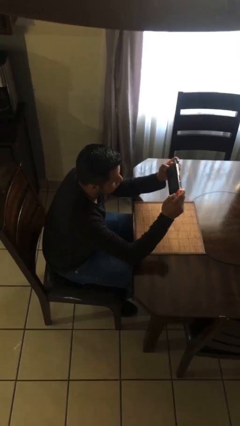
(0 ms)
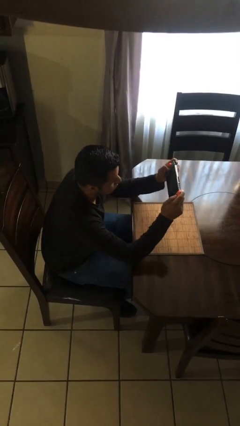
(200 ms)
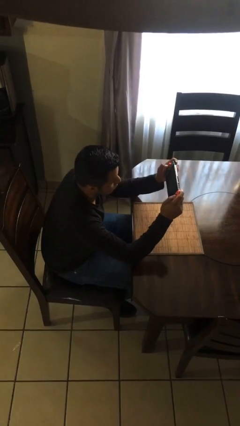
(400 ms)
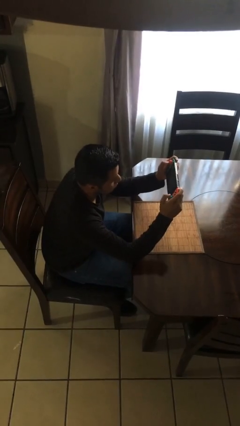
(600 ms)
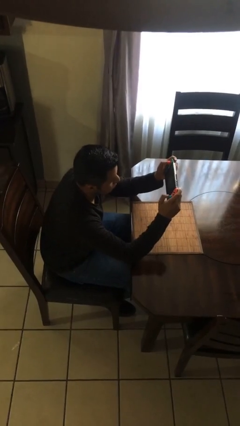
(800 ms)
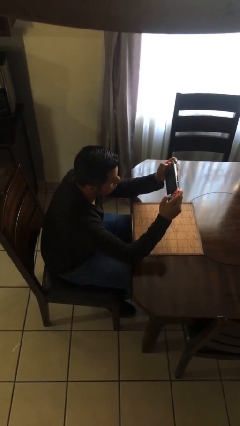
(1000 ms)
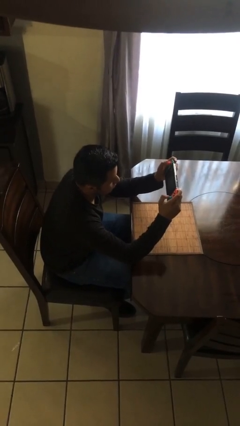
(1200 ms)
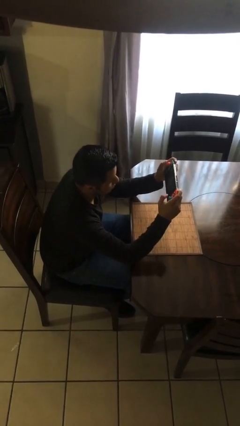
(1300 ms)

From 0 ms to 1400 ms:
person interacts with handheld game

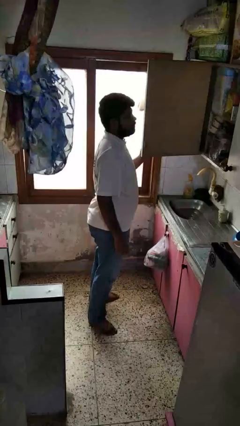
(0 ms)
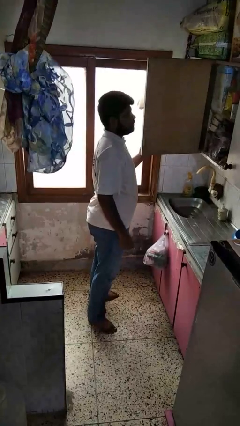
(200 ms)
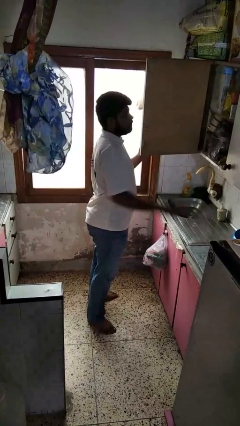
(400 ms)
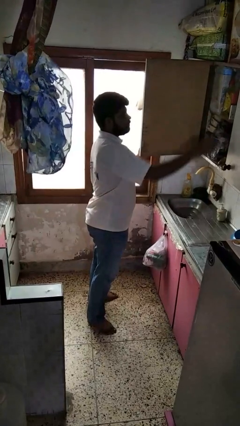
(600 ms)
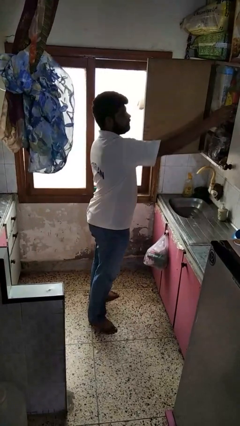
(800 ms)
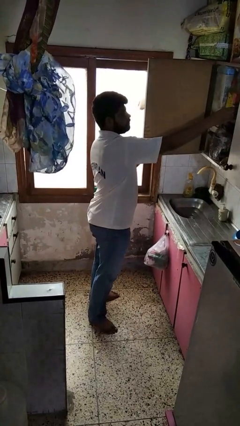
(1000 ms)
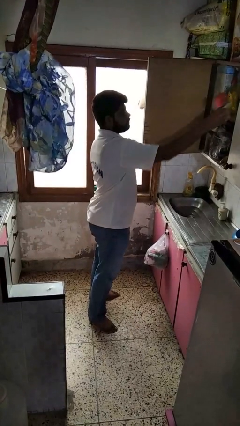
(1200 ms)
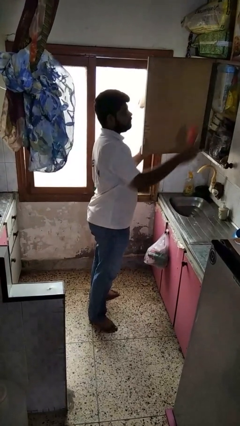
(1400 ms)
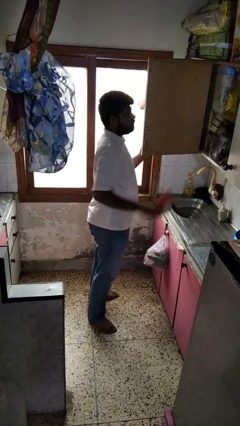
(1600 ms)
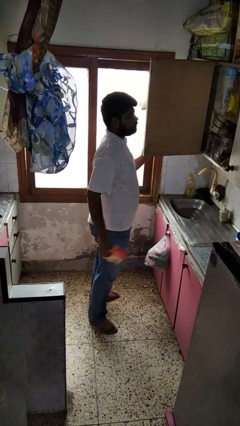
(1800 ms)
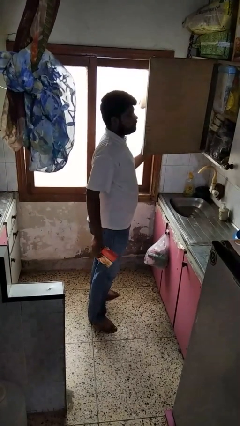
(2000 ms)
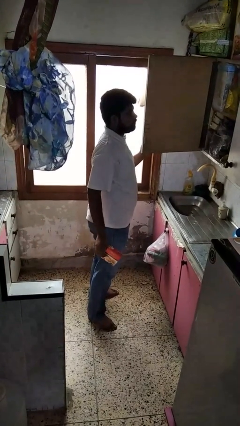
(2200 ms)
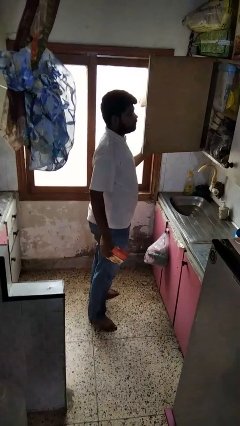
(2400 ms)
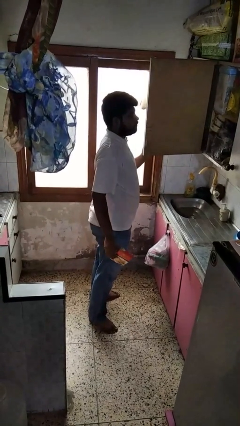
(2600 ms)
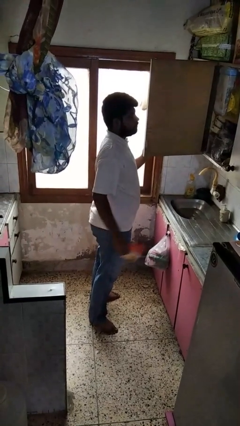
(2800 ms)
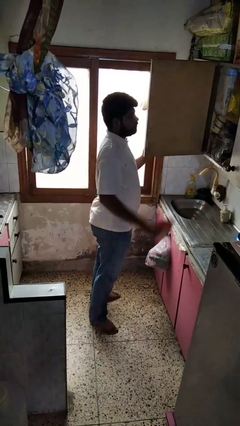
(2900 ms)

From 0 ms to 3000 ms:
person picks up object from cabinet

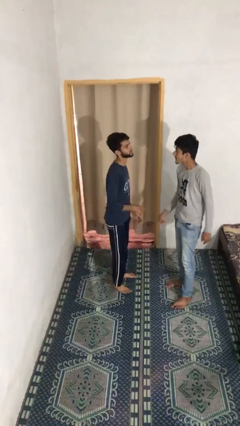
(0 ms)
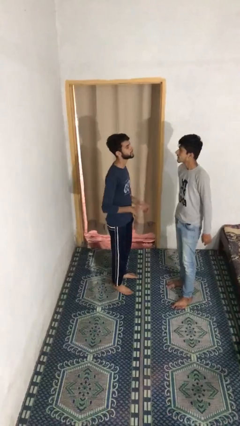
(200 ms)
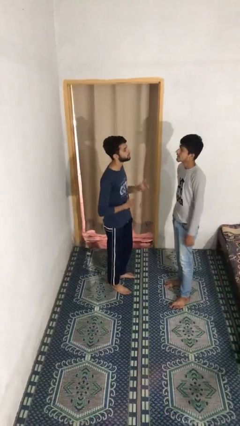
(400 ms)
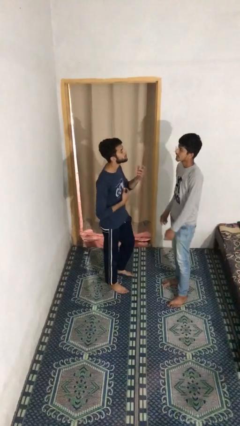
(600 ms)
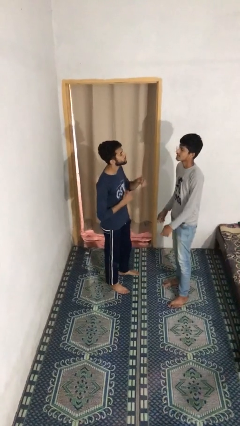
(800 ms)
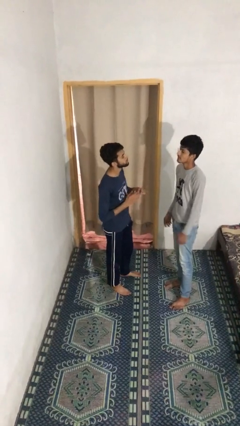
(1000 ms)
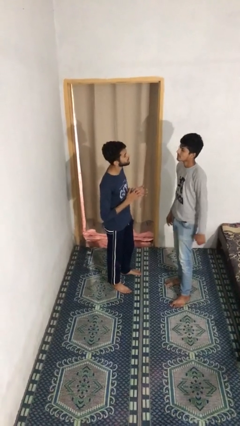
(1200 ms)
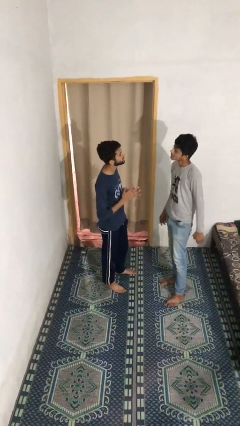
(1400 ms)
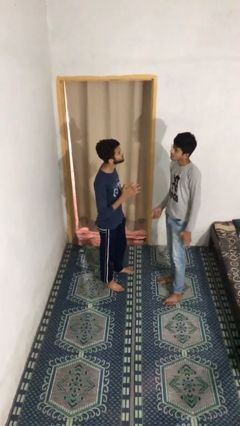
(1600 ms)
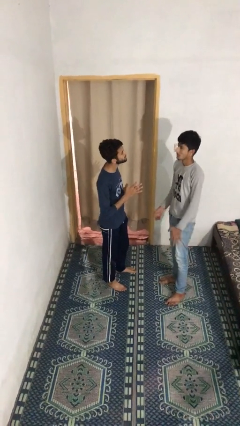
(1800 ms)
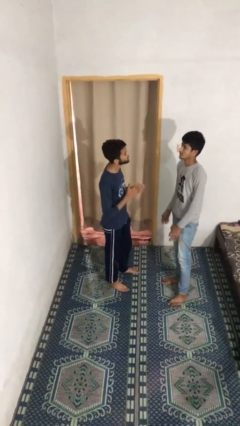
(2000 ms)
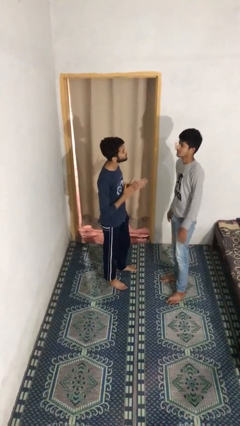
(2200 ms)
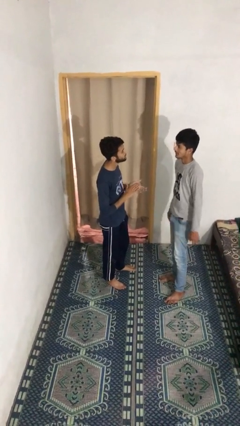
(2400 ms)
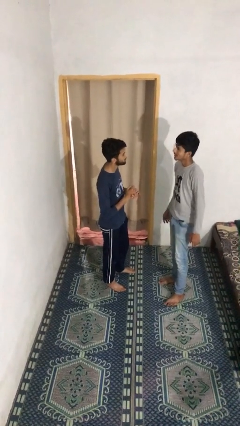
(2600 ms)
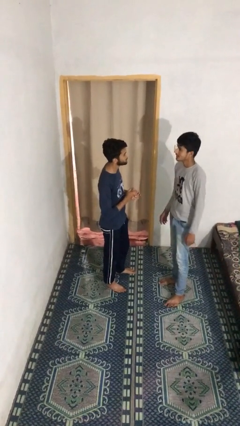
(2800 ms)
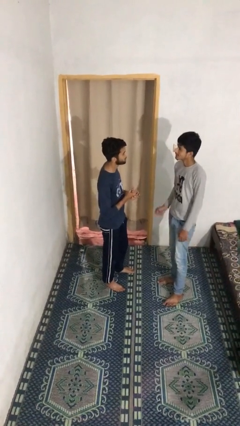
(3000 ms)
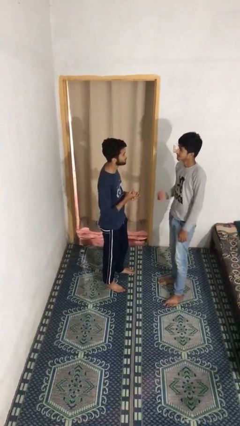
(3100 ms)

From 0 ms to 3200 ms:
person talks to person

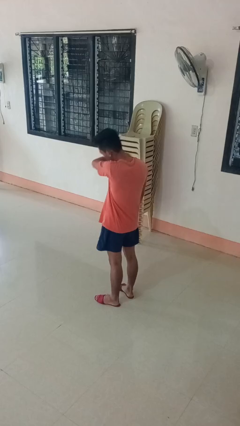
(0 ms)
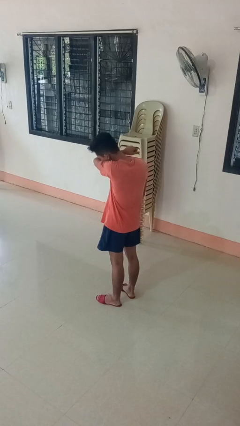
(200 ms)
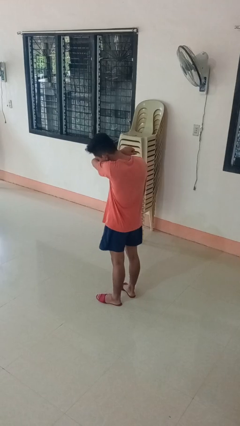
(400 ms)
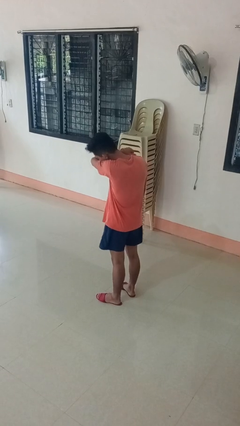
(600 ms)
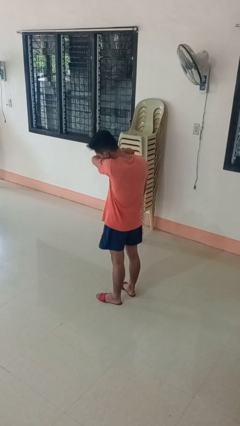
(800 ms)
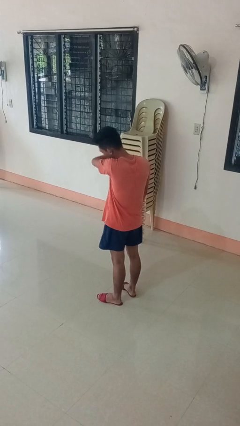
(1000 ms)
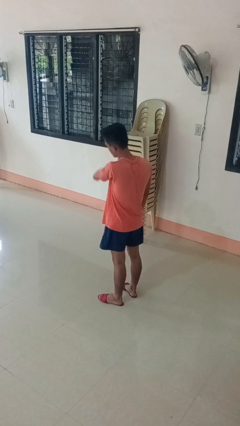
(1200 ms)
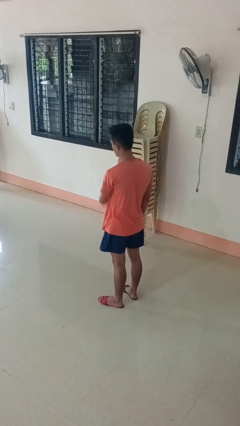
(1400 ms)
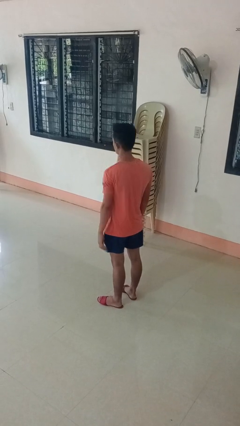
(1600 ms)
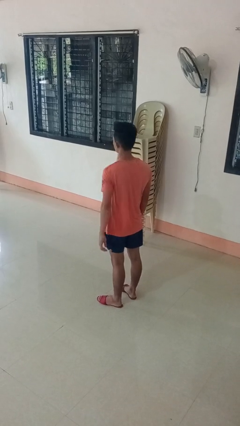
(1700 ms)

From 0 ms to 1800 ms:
person sneezes into arm

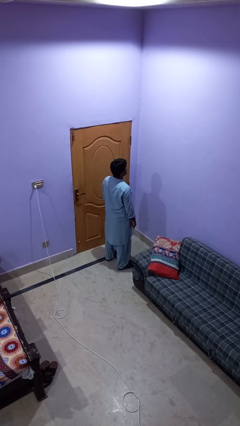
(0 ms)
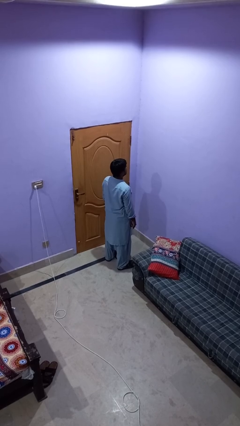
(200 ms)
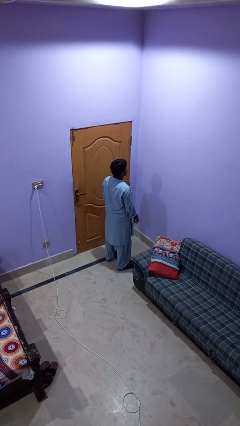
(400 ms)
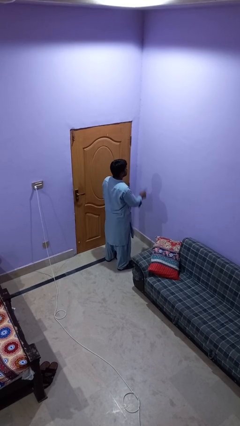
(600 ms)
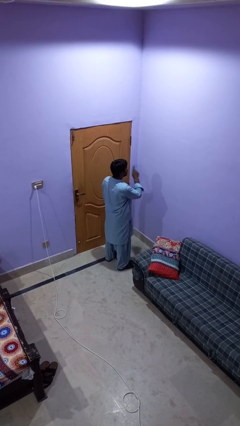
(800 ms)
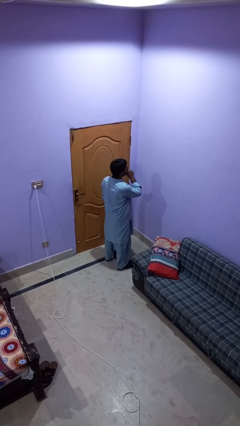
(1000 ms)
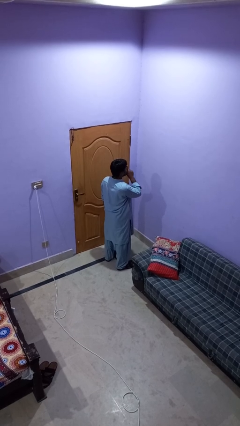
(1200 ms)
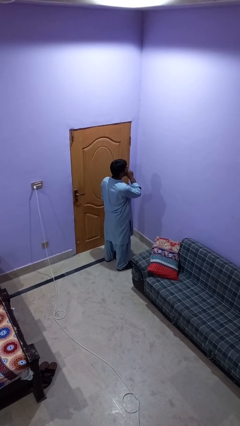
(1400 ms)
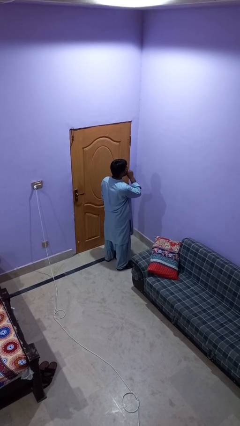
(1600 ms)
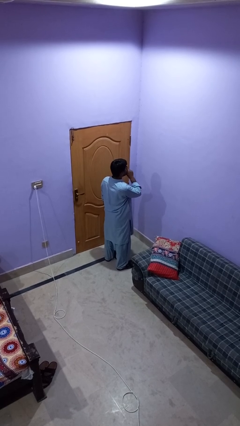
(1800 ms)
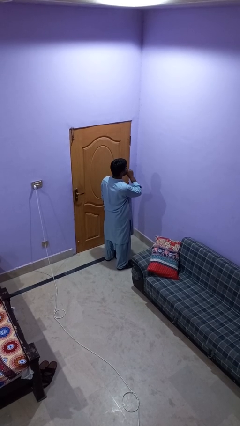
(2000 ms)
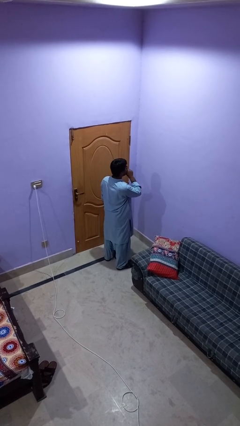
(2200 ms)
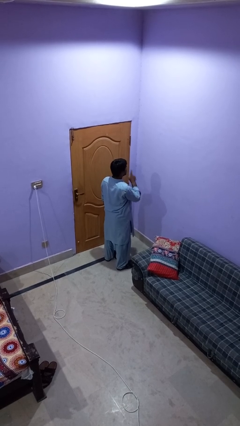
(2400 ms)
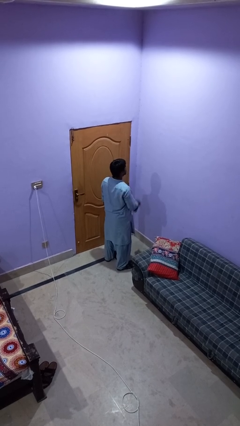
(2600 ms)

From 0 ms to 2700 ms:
person gestures be quiet

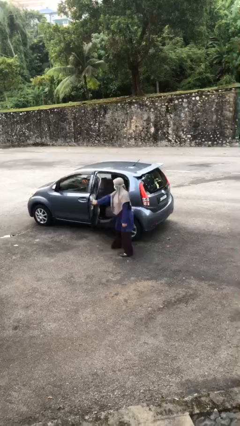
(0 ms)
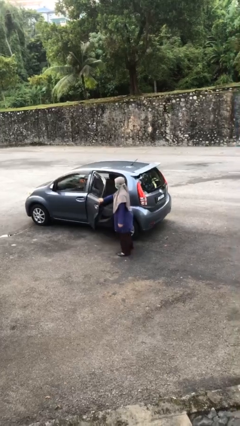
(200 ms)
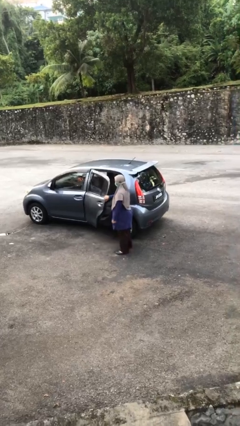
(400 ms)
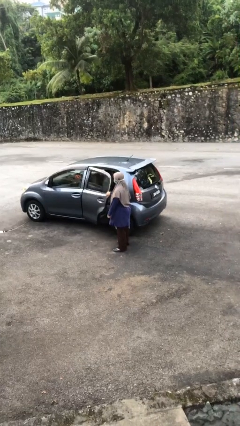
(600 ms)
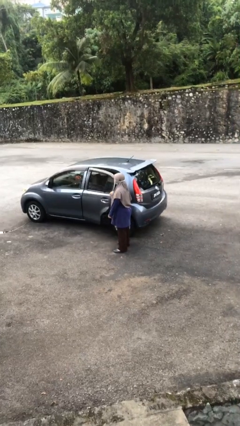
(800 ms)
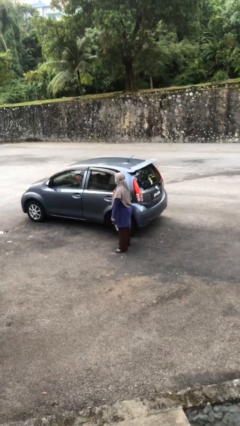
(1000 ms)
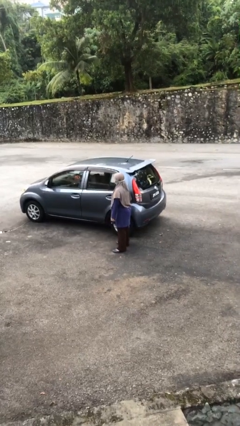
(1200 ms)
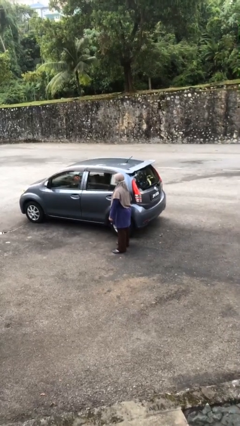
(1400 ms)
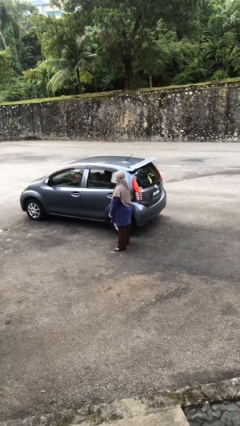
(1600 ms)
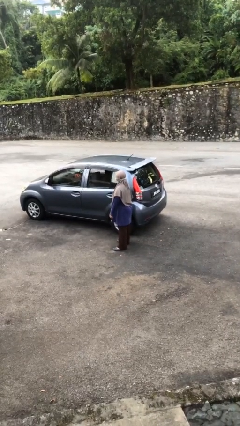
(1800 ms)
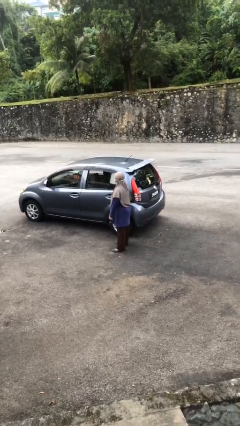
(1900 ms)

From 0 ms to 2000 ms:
person closes car door

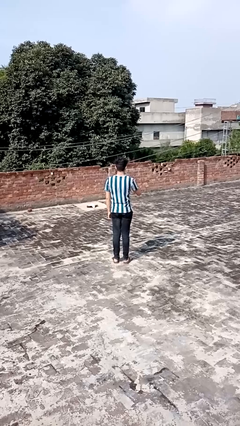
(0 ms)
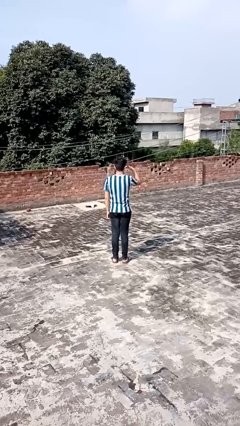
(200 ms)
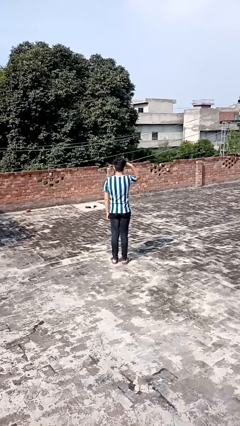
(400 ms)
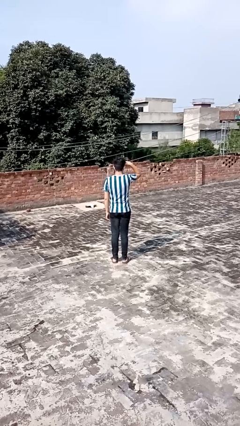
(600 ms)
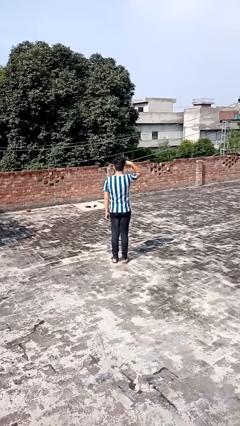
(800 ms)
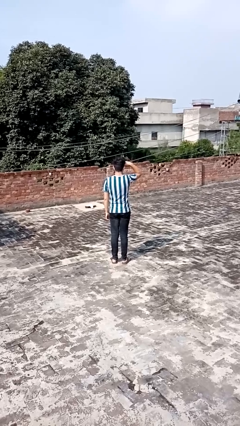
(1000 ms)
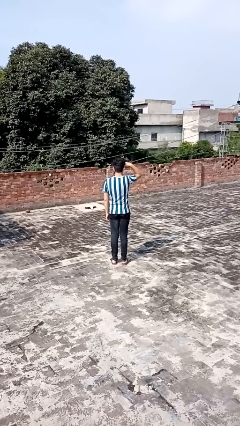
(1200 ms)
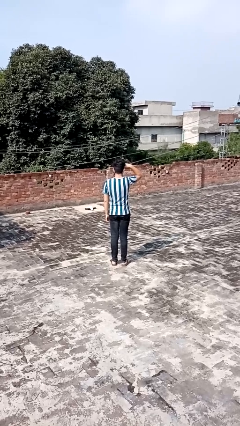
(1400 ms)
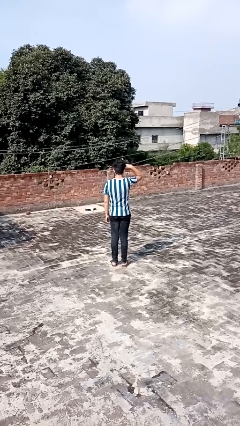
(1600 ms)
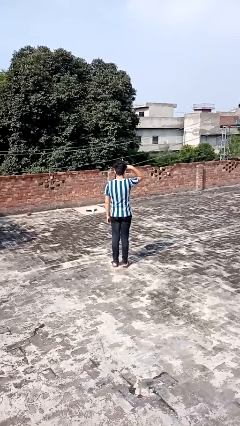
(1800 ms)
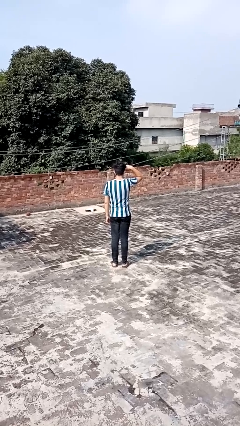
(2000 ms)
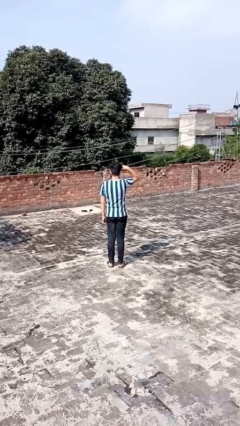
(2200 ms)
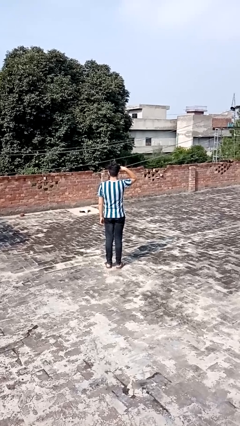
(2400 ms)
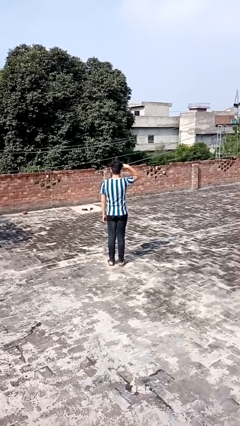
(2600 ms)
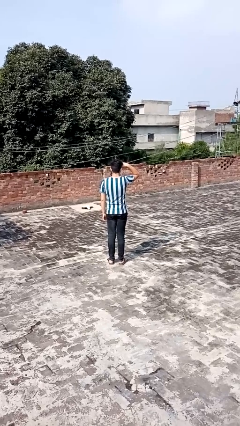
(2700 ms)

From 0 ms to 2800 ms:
person salutes
